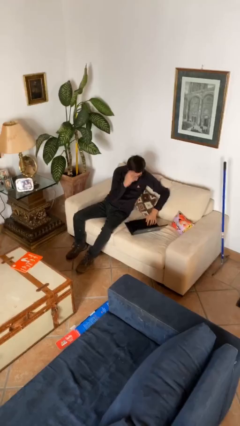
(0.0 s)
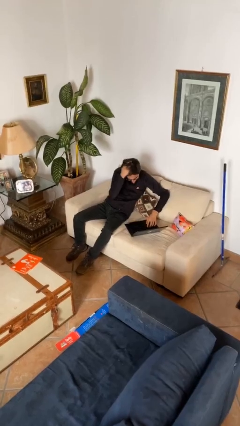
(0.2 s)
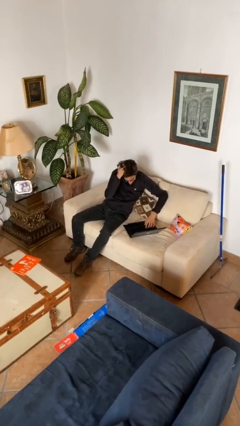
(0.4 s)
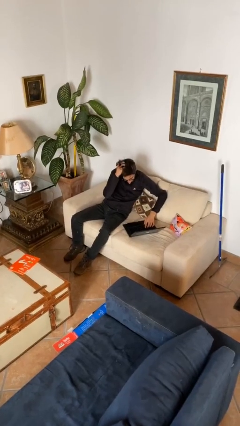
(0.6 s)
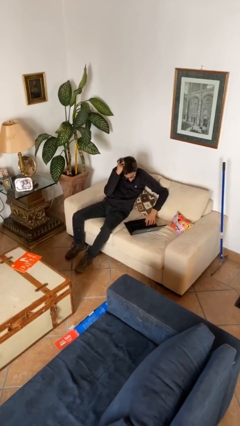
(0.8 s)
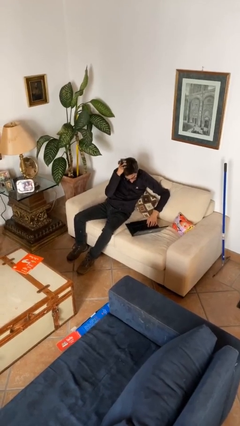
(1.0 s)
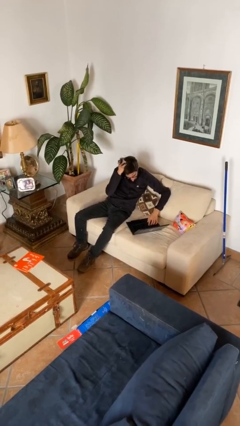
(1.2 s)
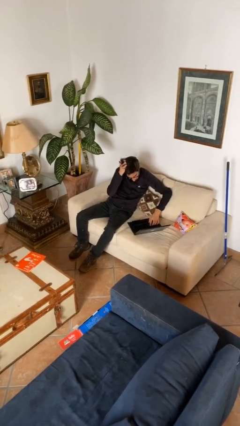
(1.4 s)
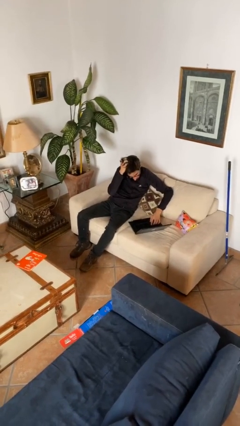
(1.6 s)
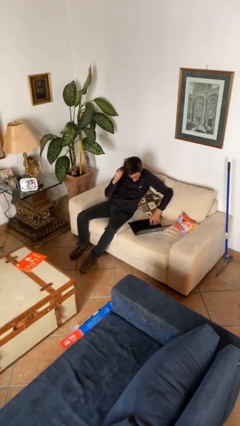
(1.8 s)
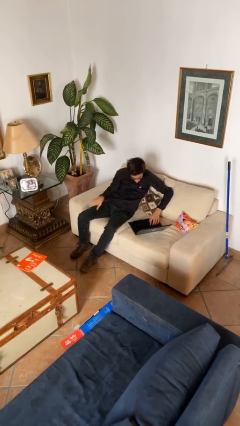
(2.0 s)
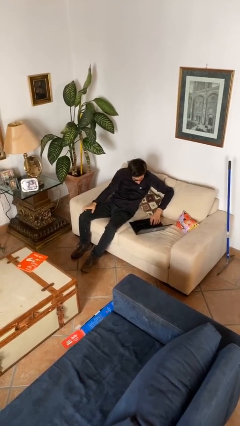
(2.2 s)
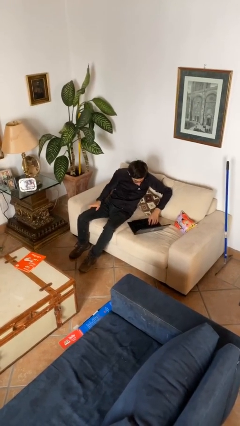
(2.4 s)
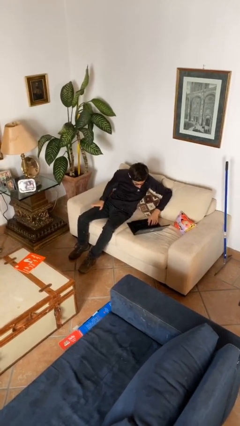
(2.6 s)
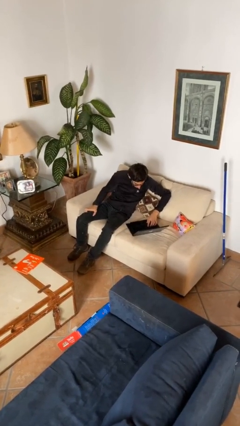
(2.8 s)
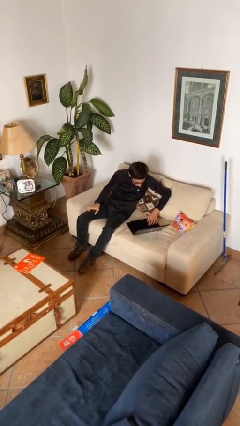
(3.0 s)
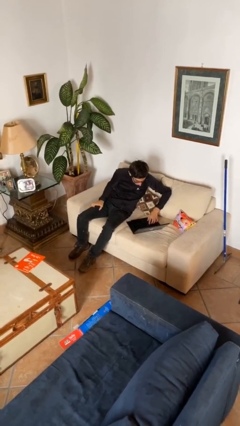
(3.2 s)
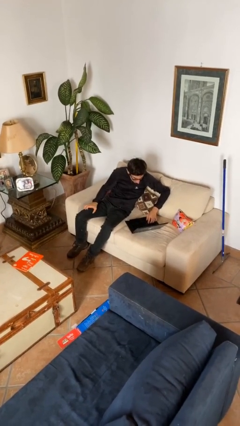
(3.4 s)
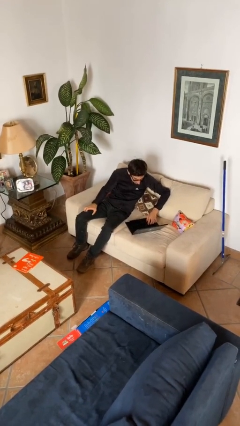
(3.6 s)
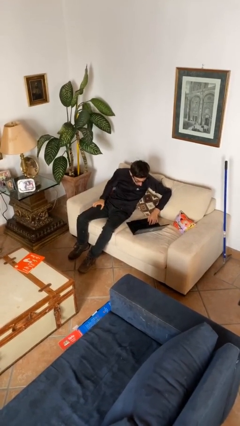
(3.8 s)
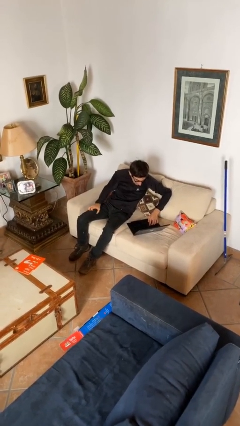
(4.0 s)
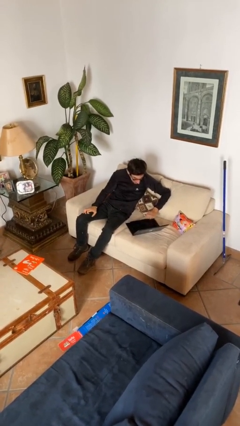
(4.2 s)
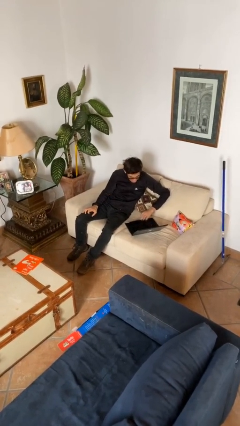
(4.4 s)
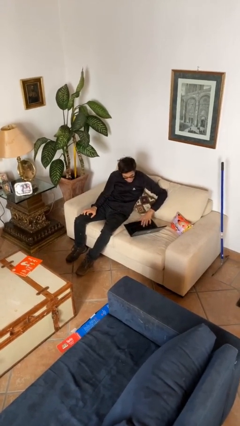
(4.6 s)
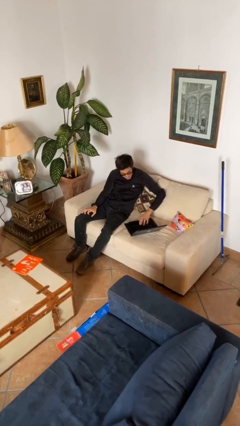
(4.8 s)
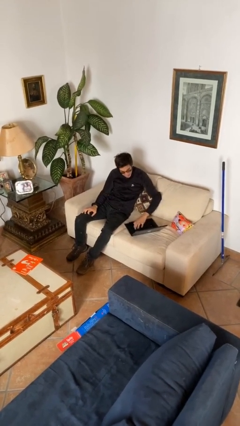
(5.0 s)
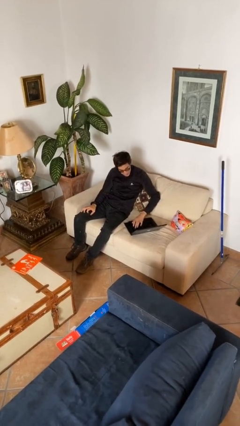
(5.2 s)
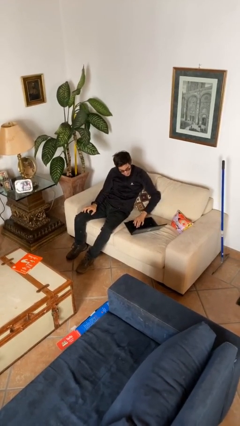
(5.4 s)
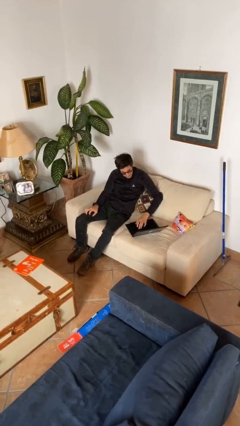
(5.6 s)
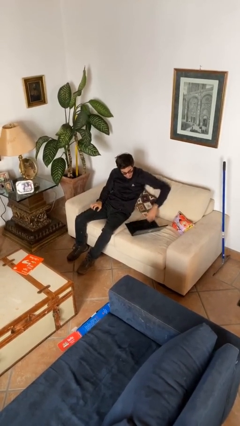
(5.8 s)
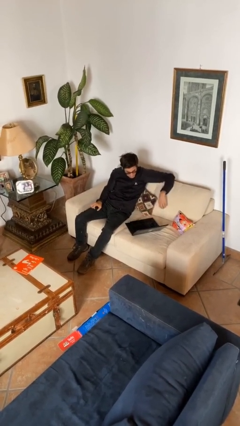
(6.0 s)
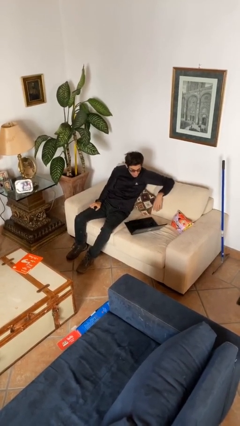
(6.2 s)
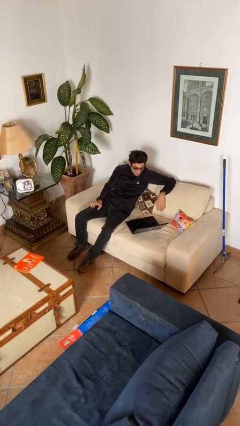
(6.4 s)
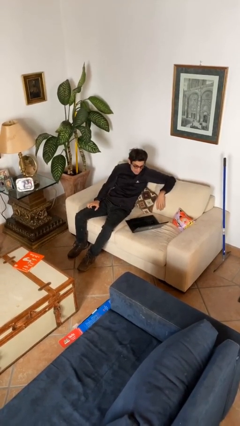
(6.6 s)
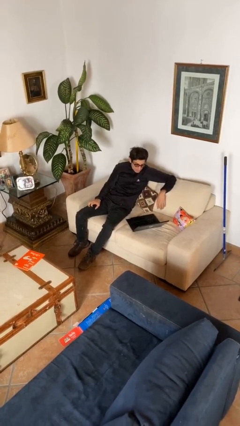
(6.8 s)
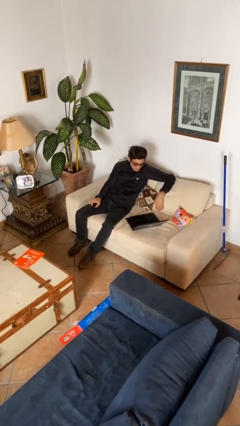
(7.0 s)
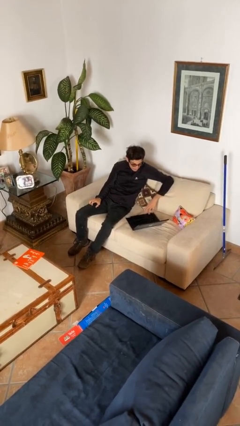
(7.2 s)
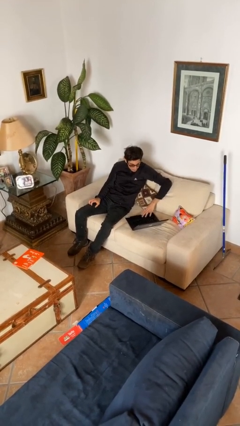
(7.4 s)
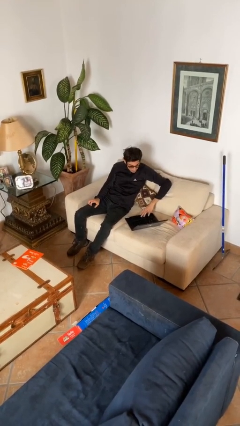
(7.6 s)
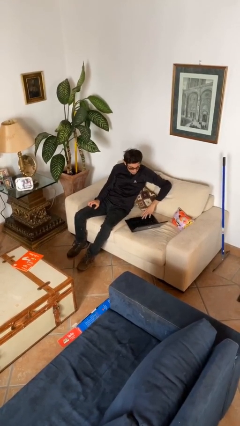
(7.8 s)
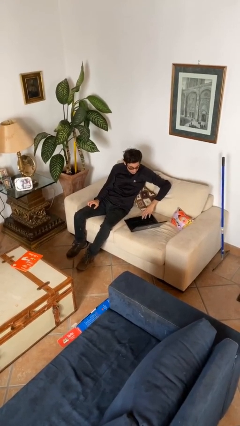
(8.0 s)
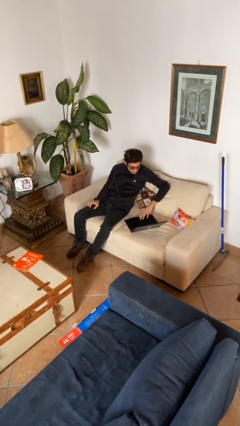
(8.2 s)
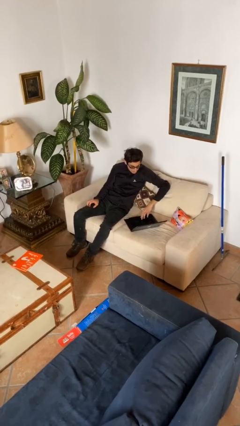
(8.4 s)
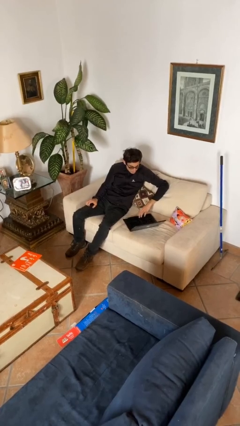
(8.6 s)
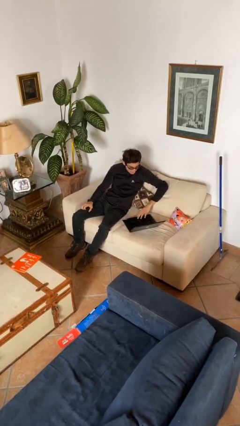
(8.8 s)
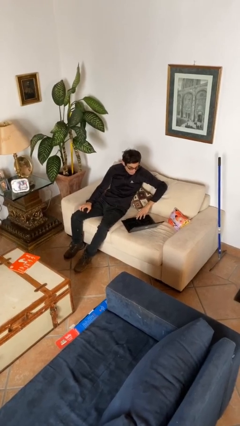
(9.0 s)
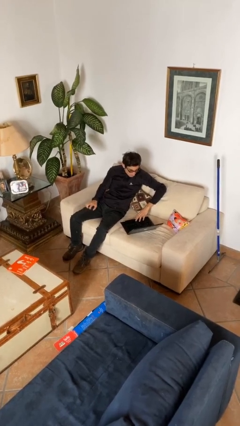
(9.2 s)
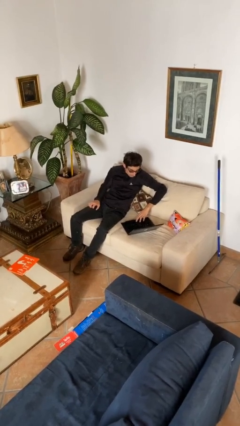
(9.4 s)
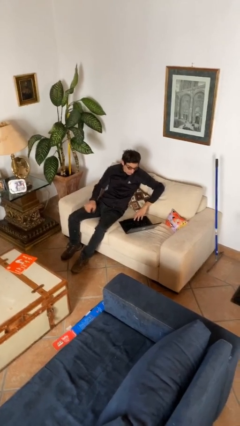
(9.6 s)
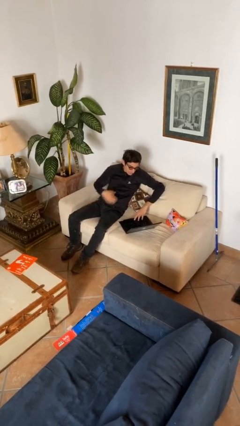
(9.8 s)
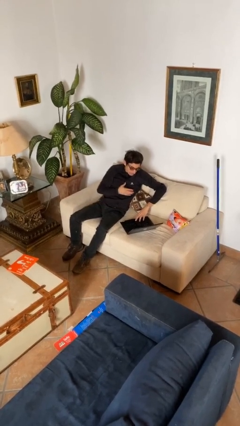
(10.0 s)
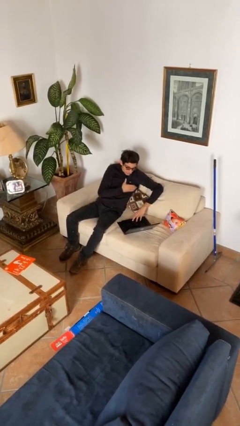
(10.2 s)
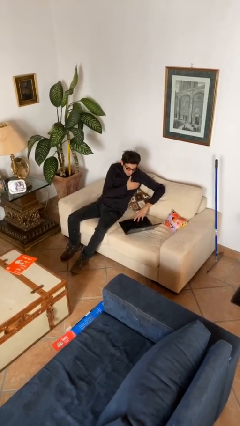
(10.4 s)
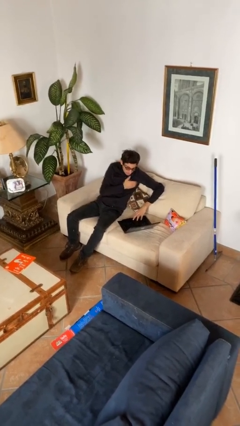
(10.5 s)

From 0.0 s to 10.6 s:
person interacts with laptop

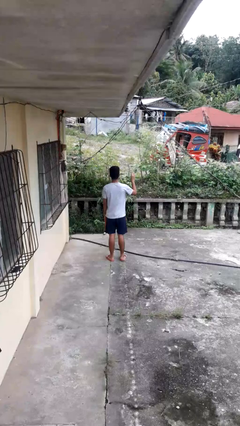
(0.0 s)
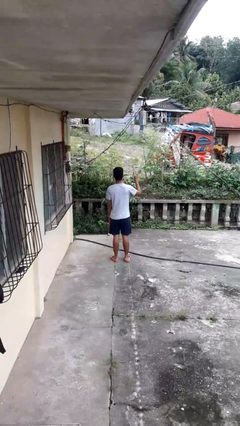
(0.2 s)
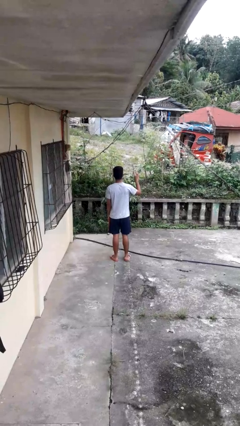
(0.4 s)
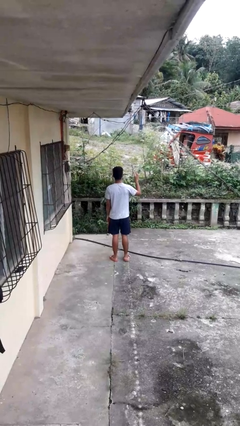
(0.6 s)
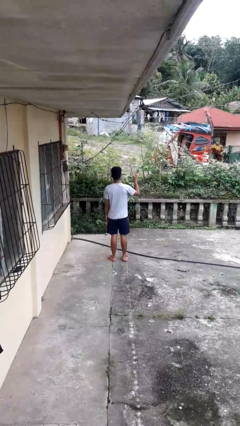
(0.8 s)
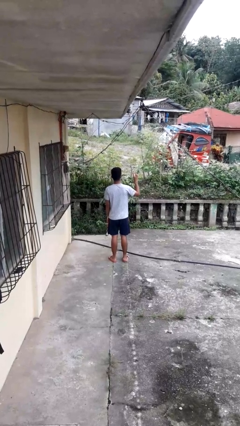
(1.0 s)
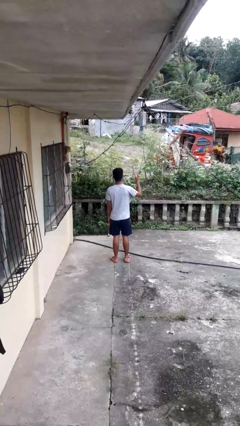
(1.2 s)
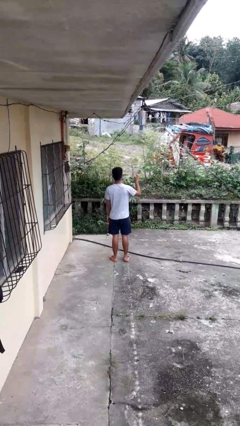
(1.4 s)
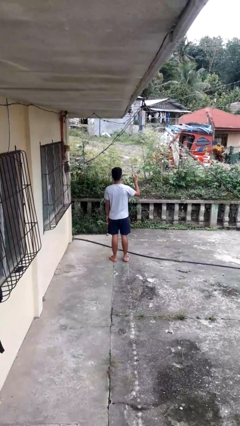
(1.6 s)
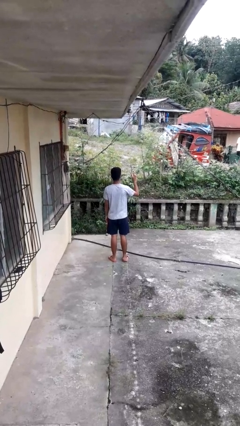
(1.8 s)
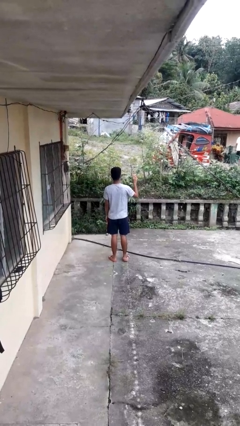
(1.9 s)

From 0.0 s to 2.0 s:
person gestures peace

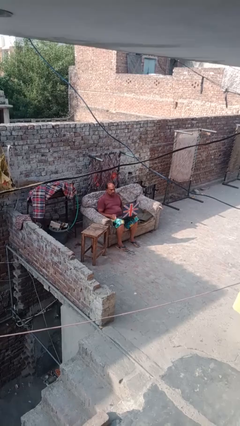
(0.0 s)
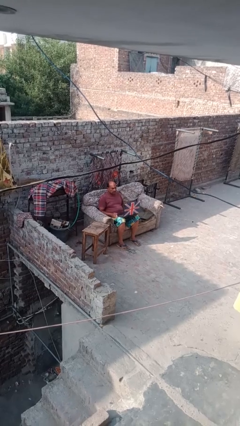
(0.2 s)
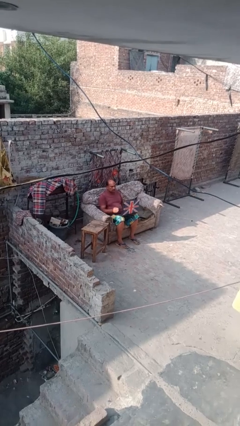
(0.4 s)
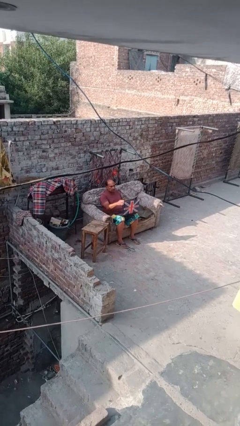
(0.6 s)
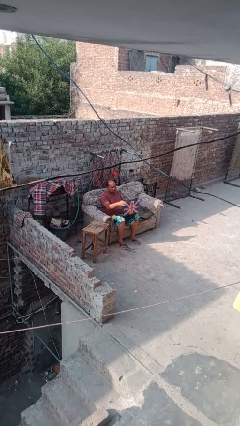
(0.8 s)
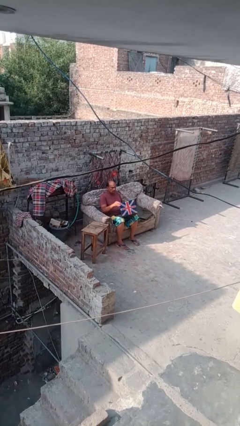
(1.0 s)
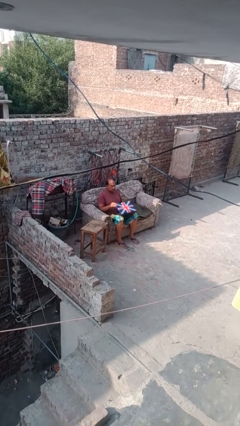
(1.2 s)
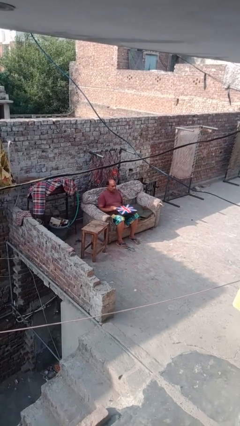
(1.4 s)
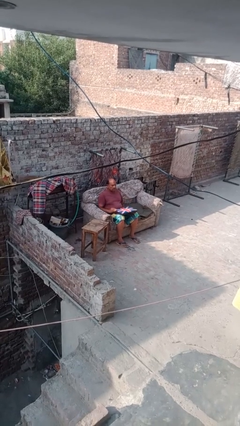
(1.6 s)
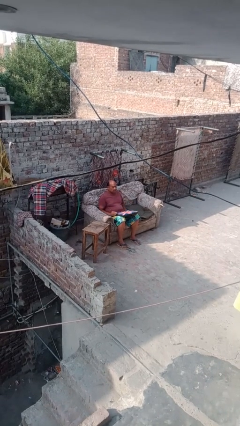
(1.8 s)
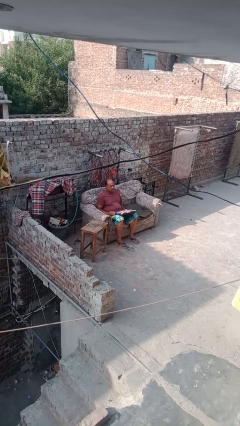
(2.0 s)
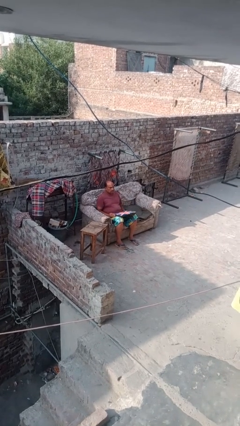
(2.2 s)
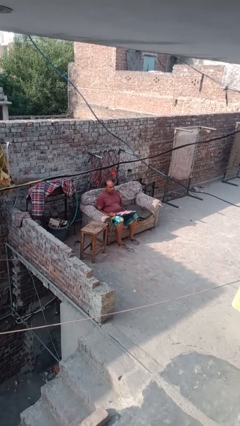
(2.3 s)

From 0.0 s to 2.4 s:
person closes laptop

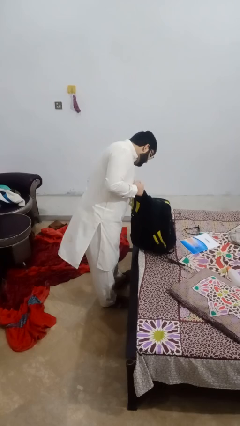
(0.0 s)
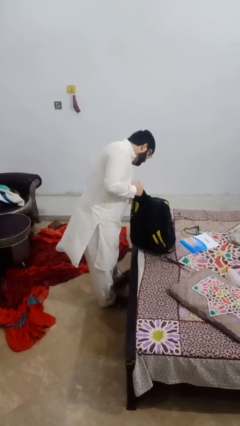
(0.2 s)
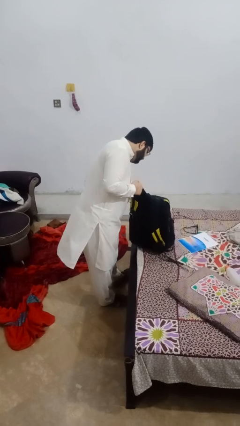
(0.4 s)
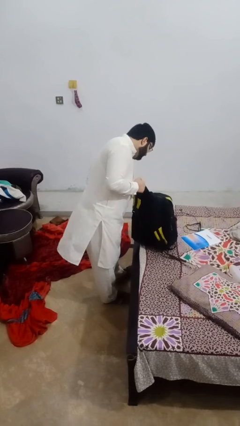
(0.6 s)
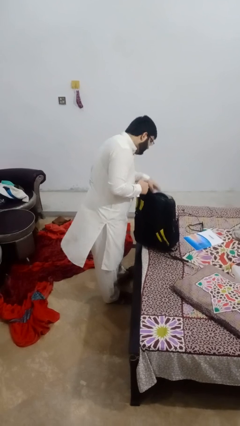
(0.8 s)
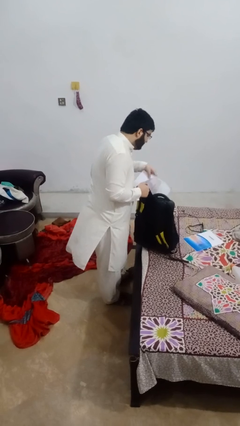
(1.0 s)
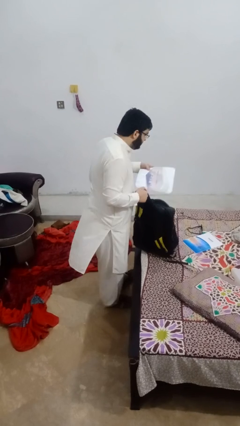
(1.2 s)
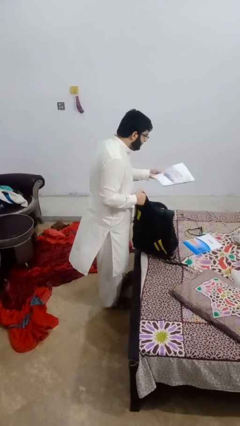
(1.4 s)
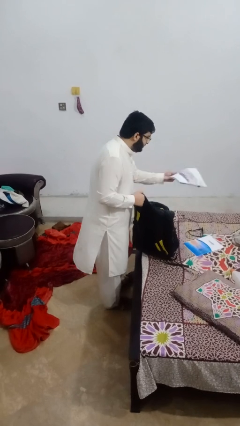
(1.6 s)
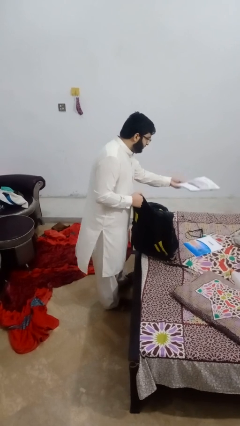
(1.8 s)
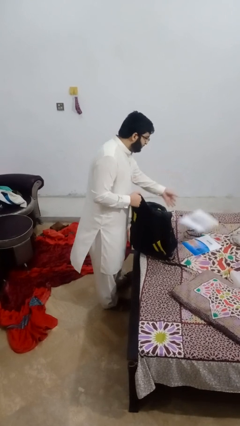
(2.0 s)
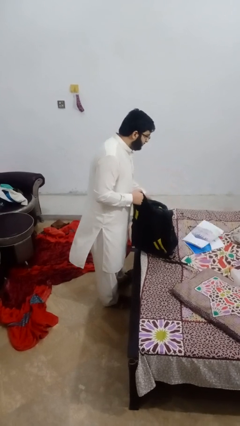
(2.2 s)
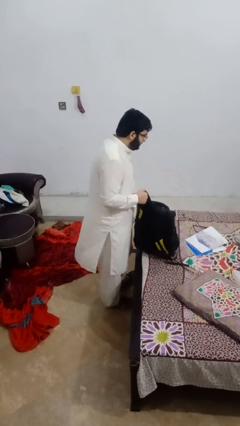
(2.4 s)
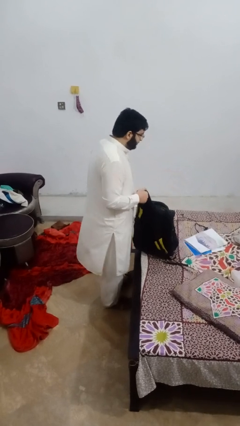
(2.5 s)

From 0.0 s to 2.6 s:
person takes object from backpack
